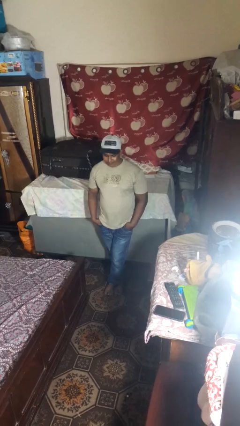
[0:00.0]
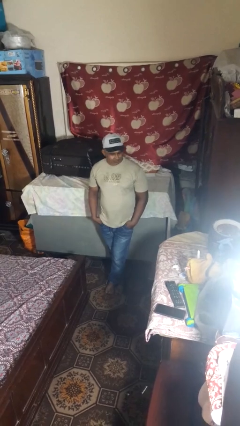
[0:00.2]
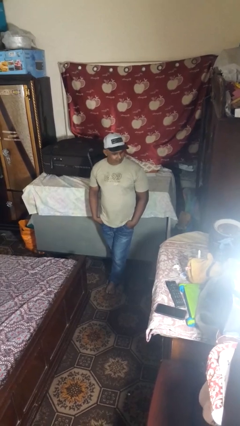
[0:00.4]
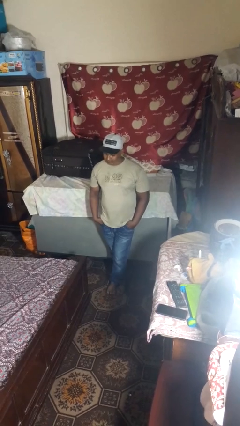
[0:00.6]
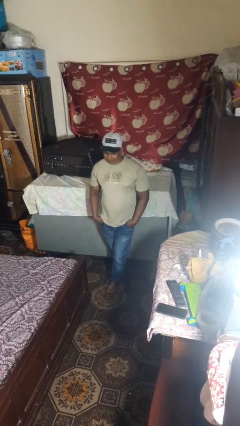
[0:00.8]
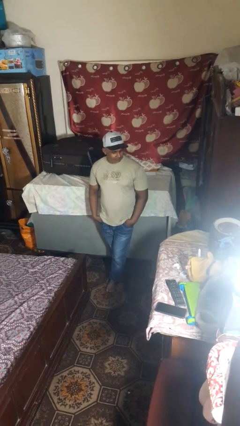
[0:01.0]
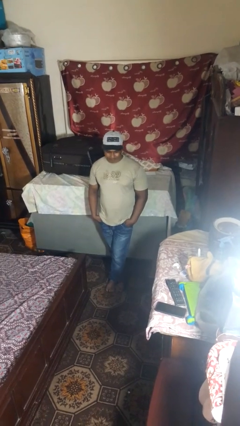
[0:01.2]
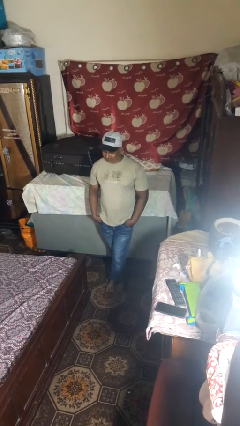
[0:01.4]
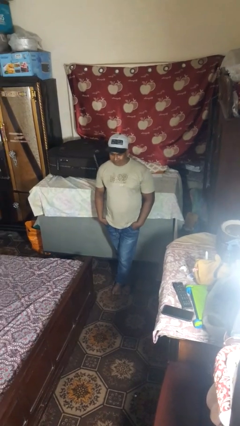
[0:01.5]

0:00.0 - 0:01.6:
person shakes head

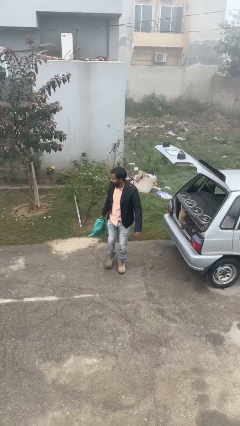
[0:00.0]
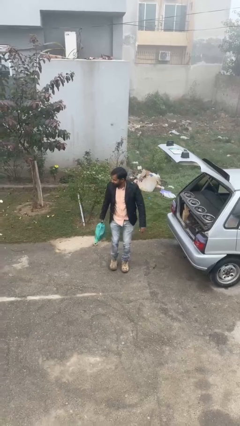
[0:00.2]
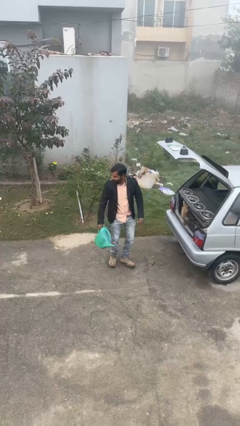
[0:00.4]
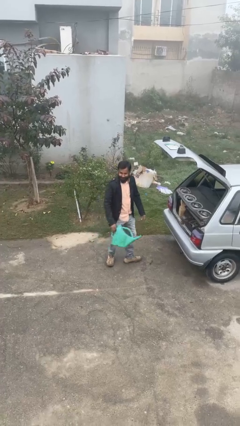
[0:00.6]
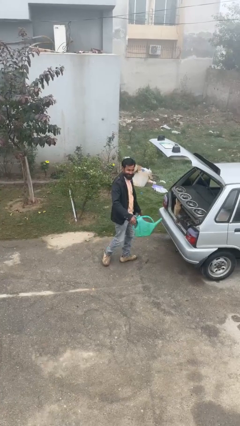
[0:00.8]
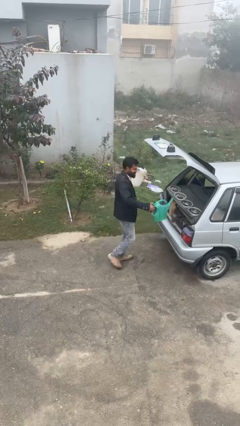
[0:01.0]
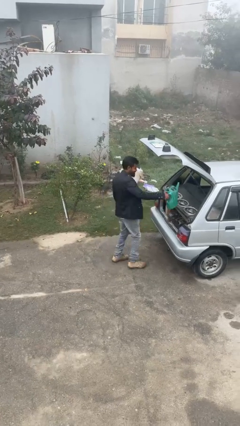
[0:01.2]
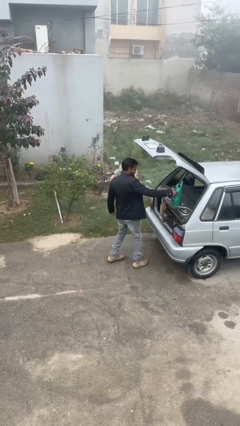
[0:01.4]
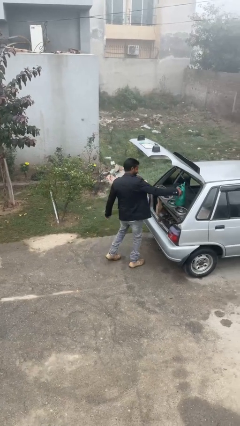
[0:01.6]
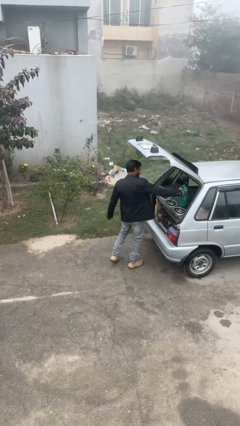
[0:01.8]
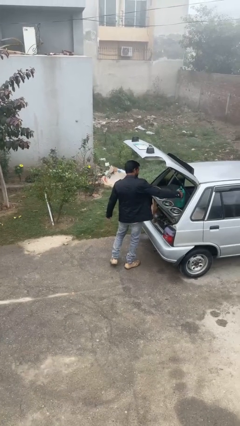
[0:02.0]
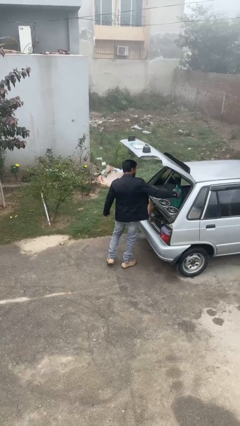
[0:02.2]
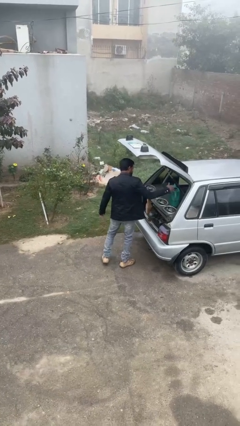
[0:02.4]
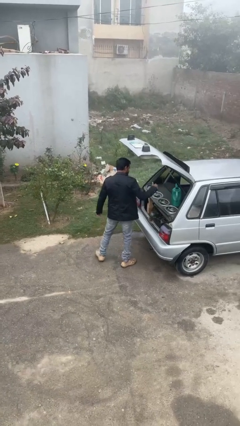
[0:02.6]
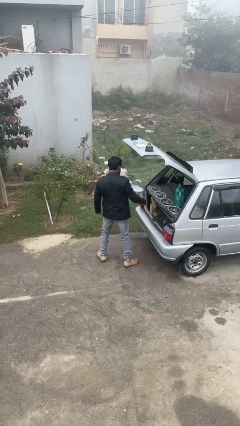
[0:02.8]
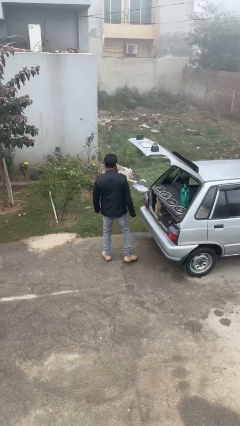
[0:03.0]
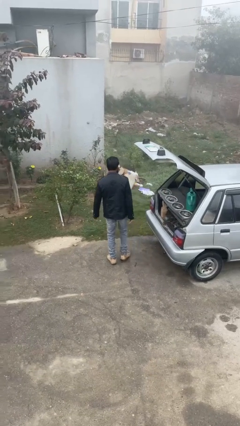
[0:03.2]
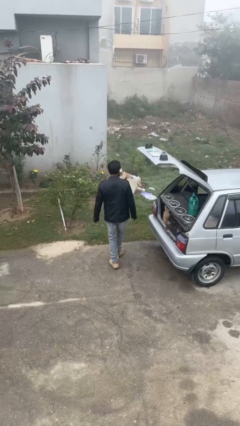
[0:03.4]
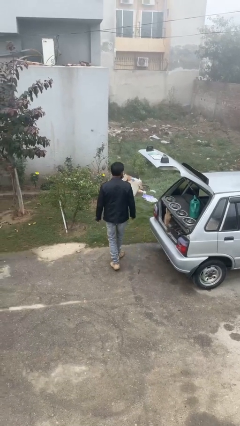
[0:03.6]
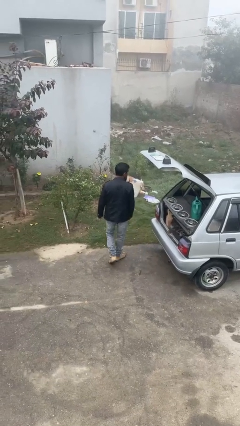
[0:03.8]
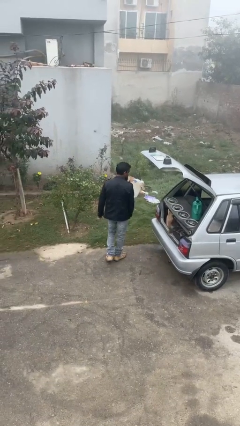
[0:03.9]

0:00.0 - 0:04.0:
person loads car

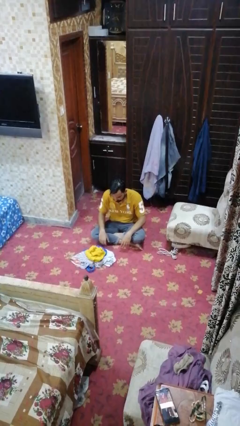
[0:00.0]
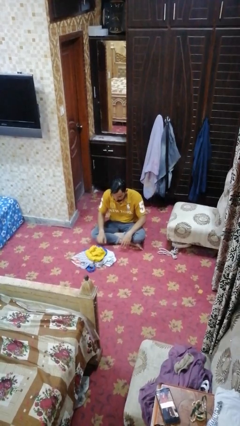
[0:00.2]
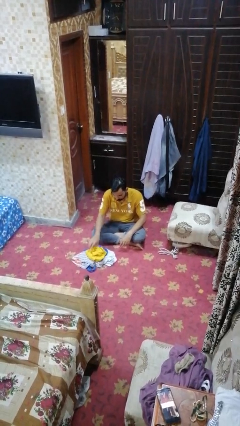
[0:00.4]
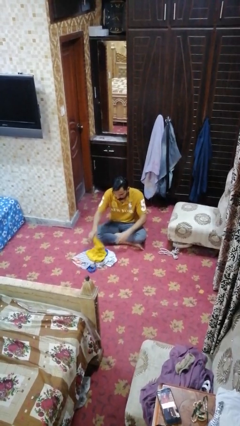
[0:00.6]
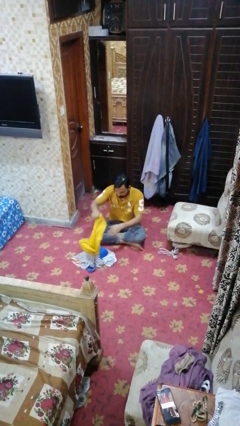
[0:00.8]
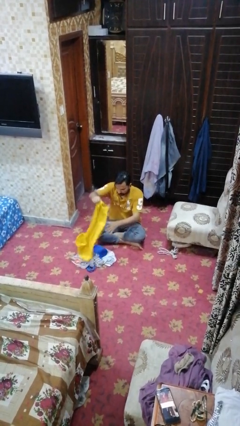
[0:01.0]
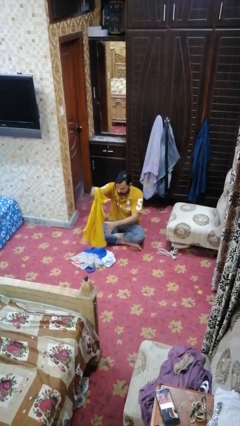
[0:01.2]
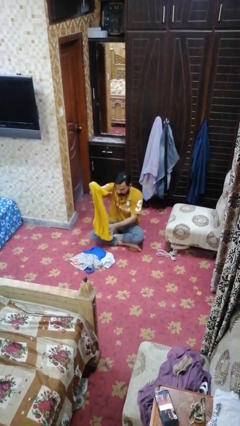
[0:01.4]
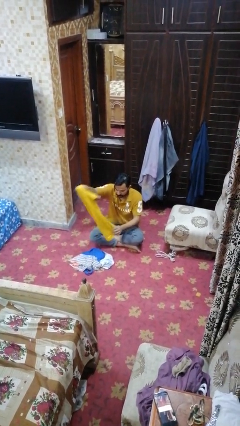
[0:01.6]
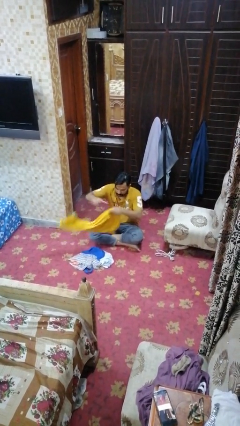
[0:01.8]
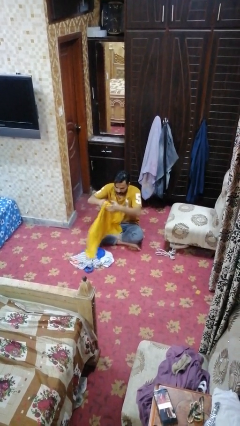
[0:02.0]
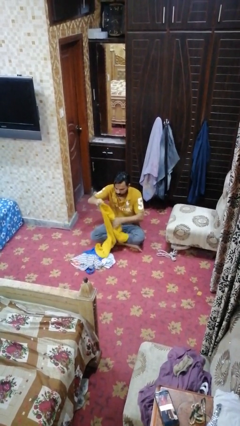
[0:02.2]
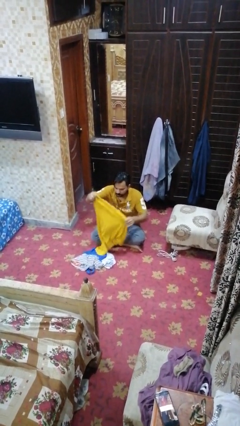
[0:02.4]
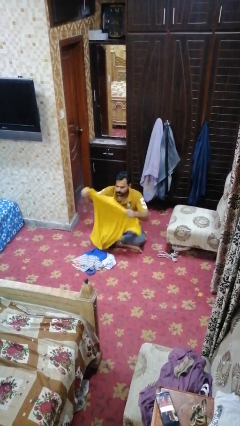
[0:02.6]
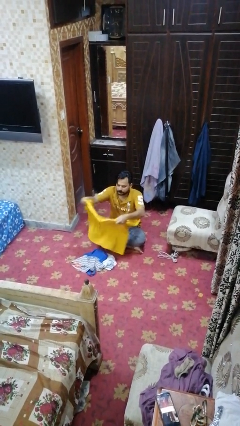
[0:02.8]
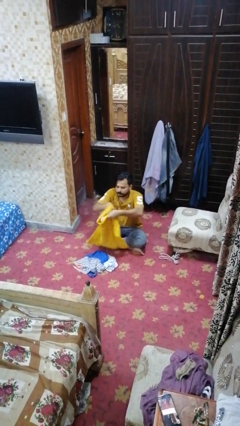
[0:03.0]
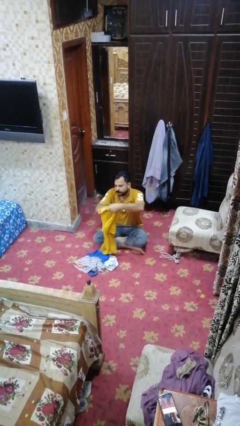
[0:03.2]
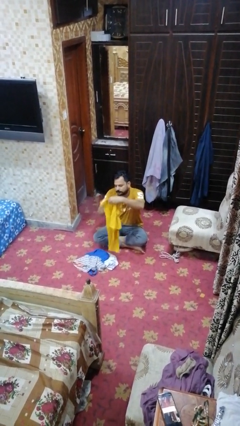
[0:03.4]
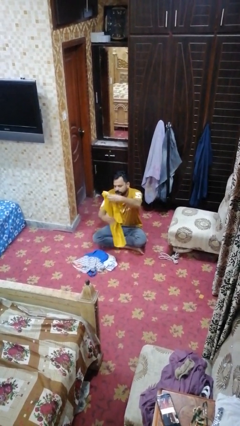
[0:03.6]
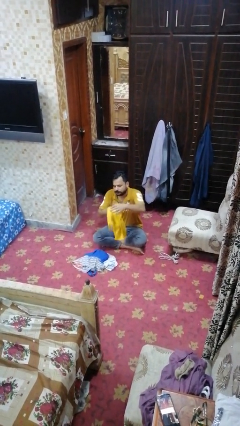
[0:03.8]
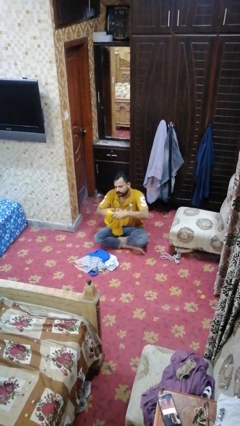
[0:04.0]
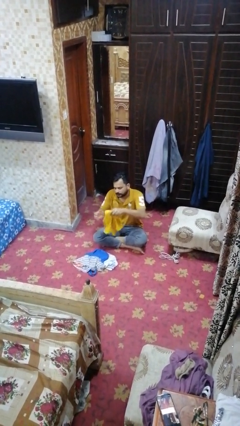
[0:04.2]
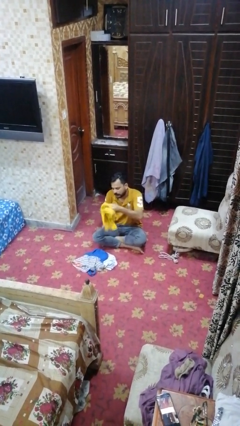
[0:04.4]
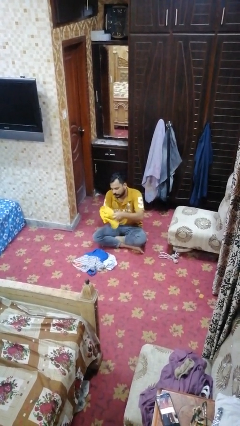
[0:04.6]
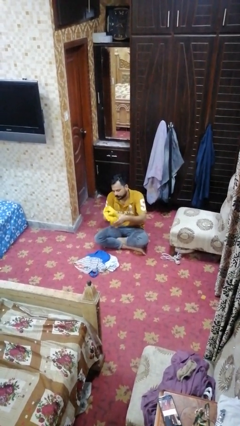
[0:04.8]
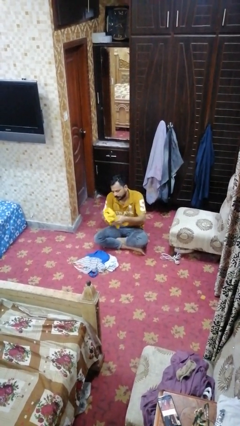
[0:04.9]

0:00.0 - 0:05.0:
person folds shirt

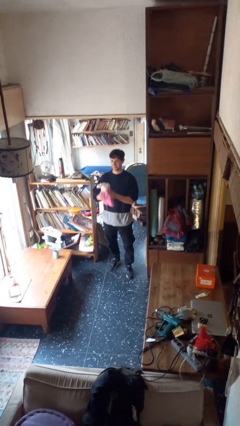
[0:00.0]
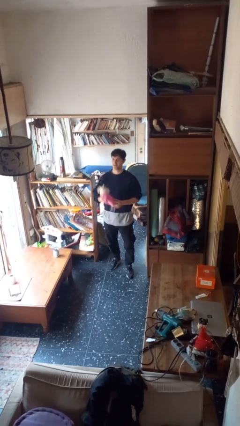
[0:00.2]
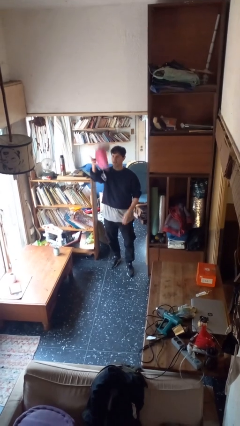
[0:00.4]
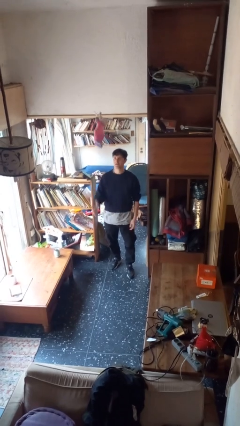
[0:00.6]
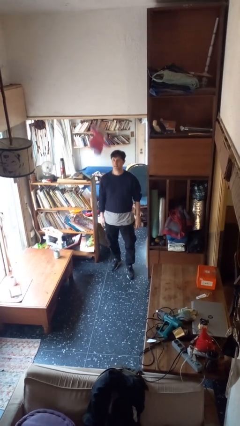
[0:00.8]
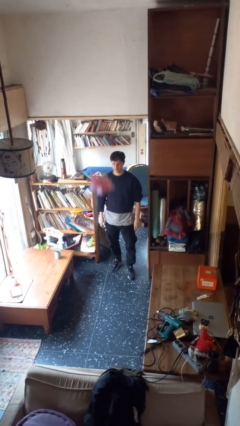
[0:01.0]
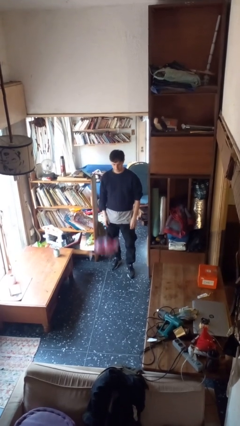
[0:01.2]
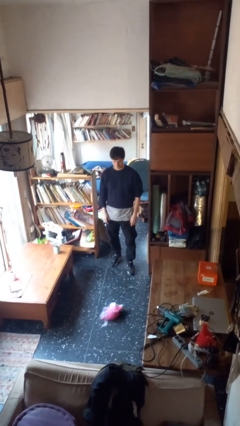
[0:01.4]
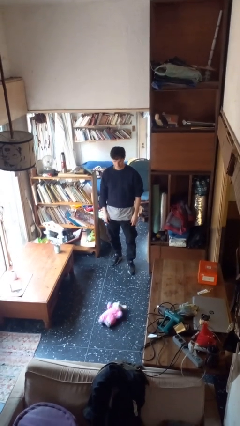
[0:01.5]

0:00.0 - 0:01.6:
person throws object into air

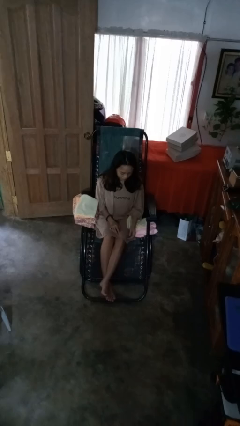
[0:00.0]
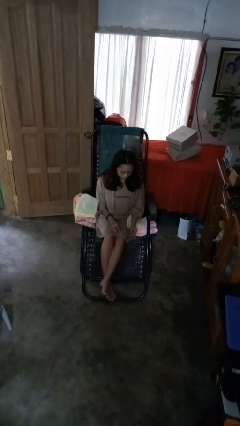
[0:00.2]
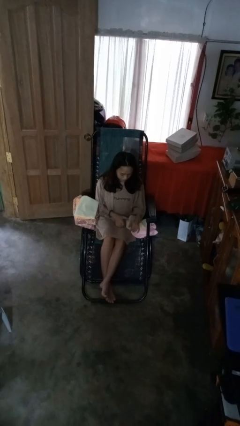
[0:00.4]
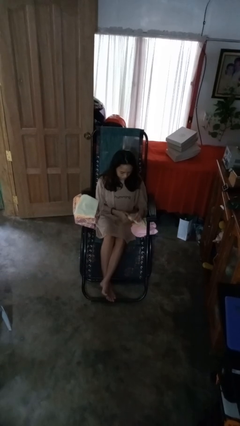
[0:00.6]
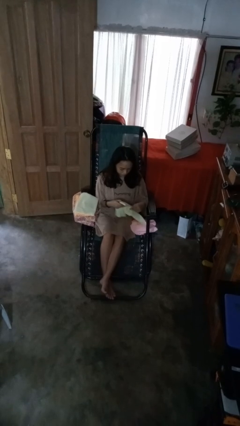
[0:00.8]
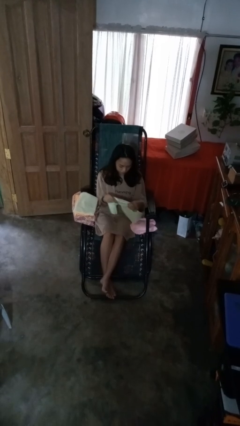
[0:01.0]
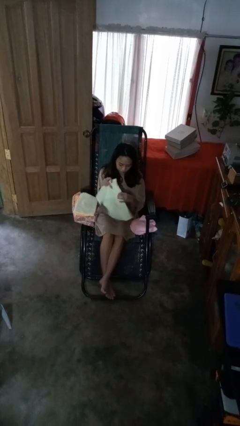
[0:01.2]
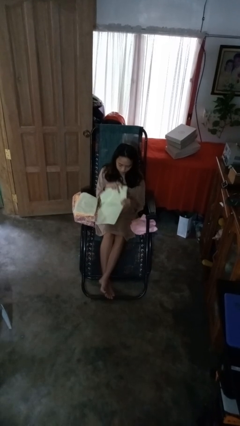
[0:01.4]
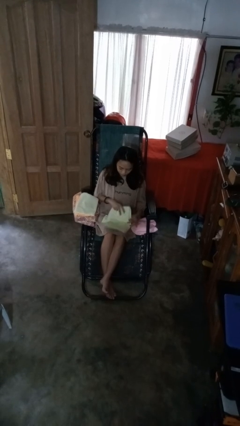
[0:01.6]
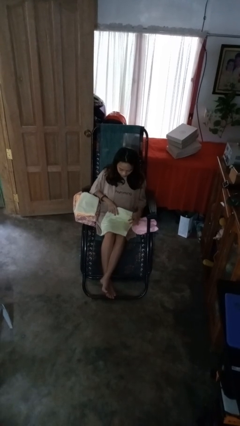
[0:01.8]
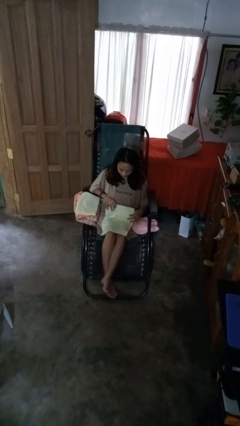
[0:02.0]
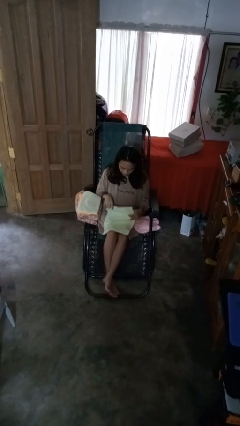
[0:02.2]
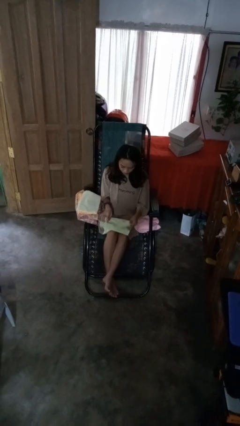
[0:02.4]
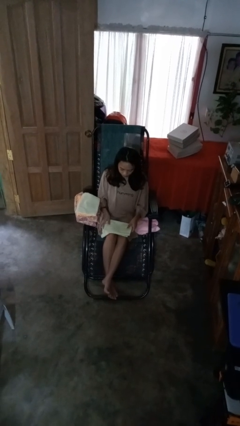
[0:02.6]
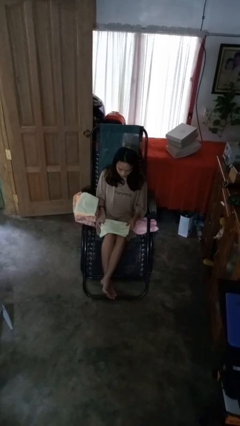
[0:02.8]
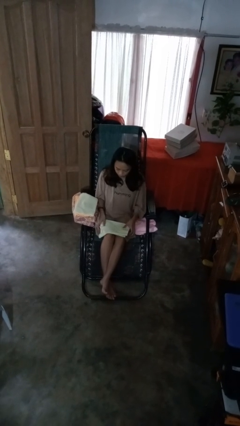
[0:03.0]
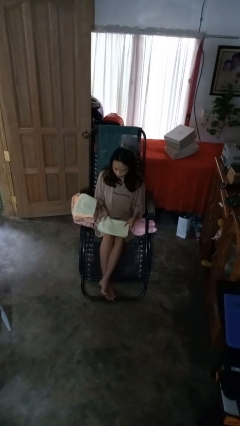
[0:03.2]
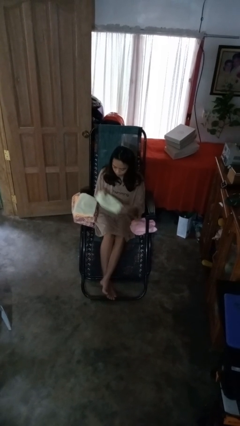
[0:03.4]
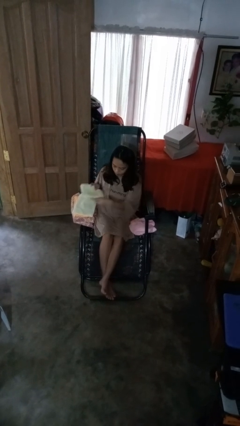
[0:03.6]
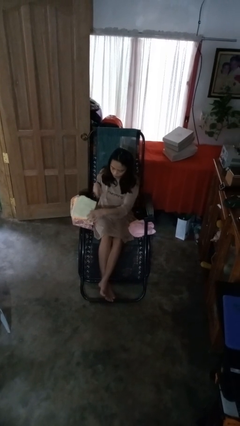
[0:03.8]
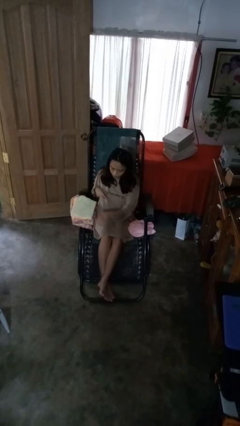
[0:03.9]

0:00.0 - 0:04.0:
person folds towel

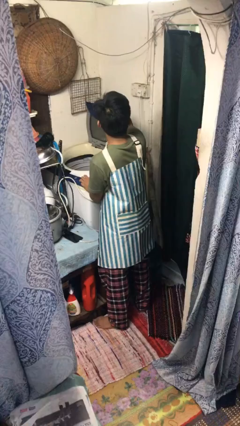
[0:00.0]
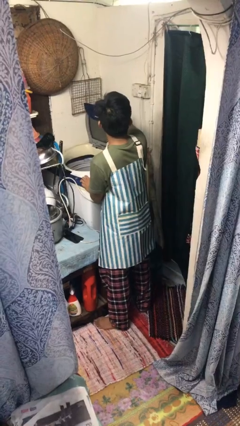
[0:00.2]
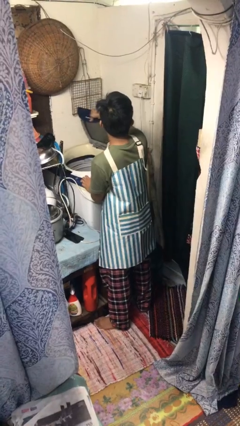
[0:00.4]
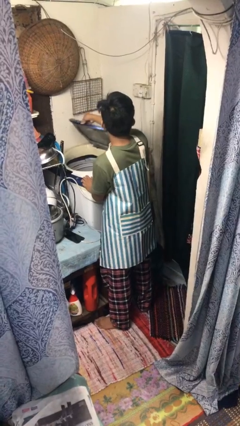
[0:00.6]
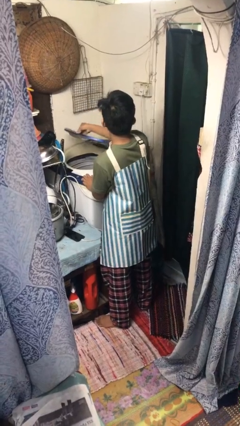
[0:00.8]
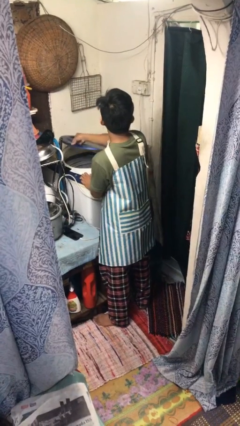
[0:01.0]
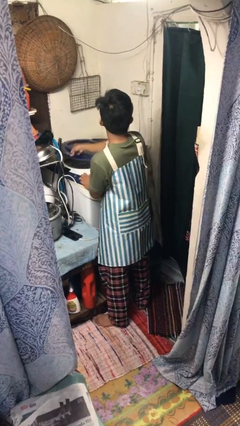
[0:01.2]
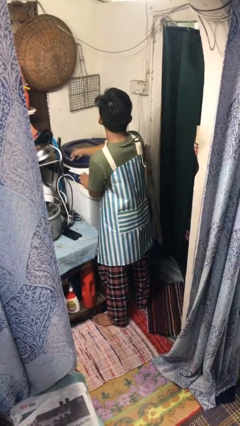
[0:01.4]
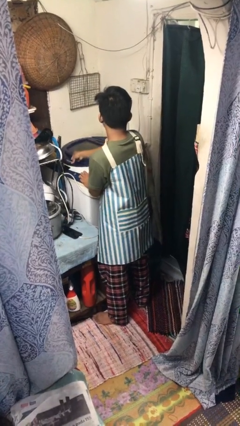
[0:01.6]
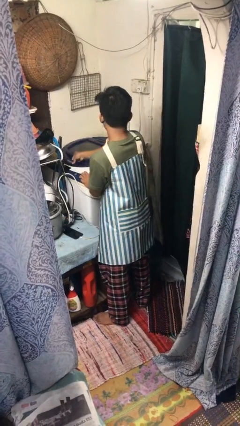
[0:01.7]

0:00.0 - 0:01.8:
person closes clothes washer
